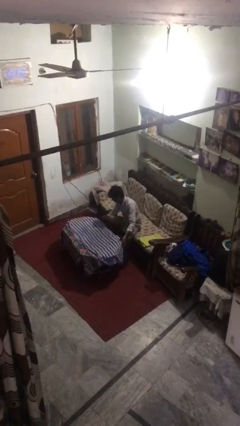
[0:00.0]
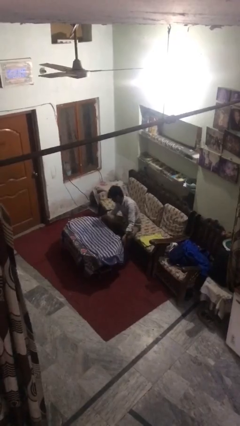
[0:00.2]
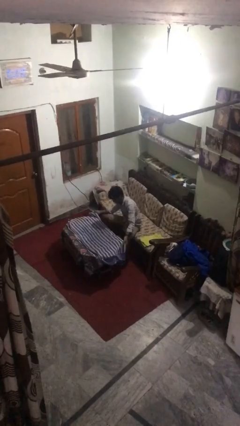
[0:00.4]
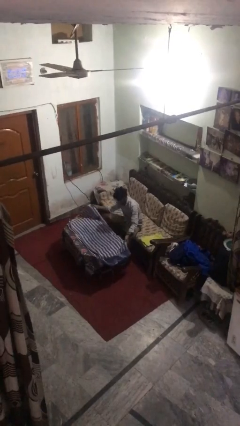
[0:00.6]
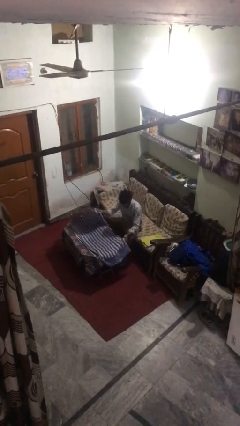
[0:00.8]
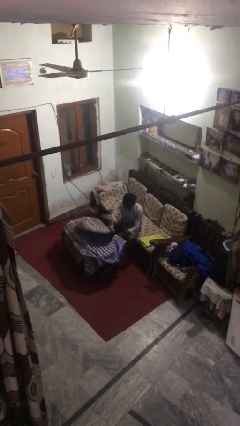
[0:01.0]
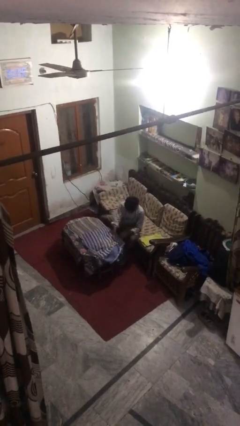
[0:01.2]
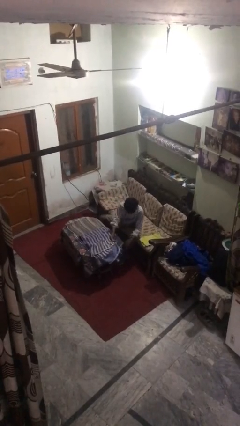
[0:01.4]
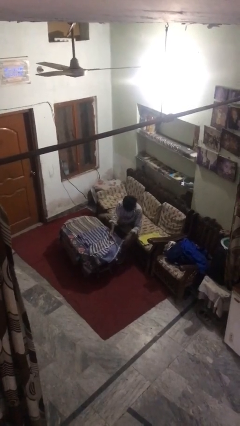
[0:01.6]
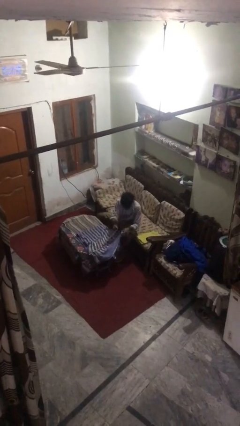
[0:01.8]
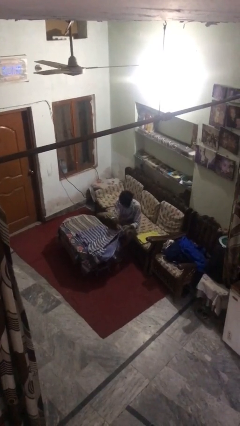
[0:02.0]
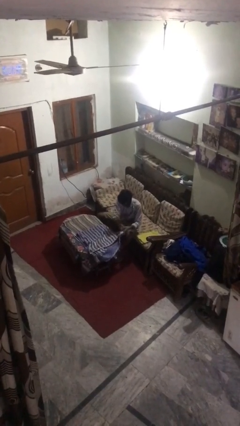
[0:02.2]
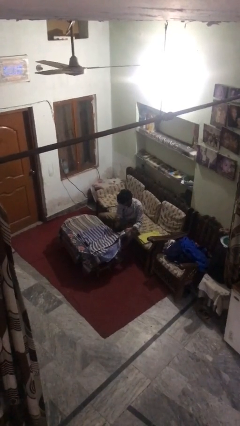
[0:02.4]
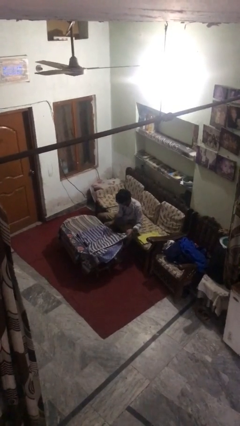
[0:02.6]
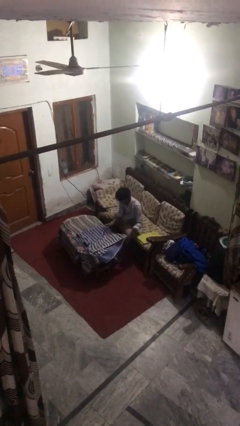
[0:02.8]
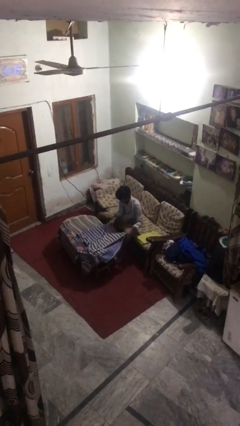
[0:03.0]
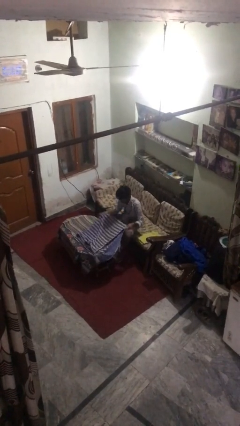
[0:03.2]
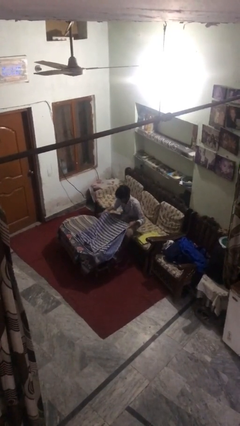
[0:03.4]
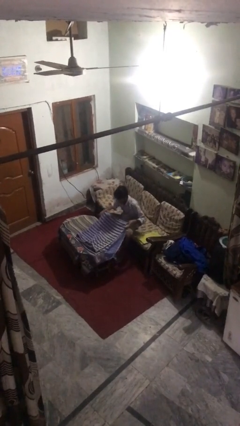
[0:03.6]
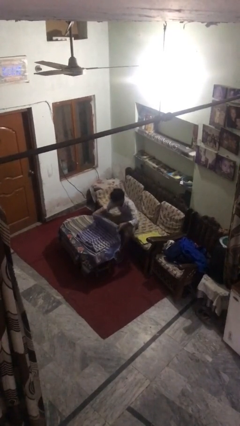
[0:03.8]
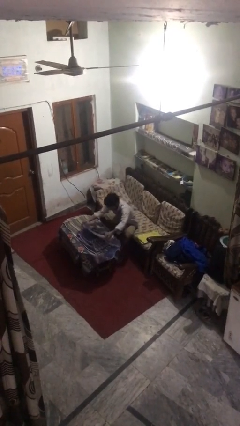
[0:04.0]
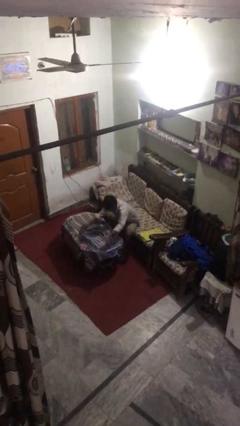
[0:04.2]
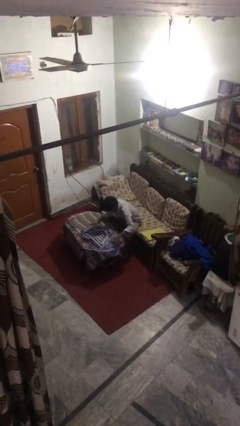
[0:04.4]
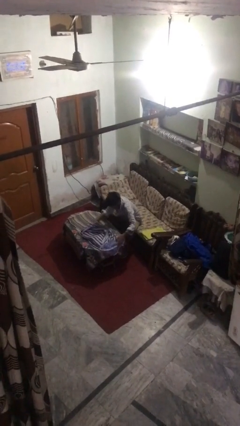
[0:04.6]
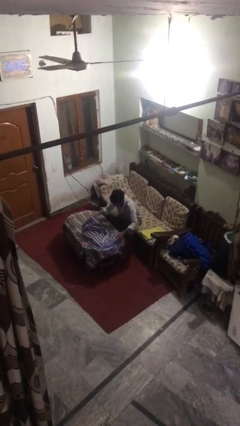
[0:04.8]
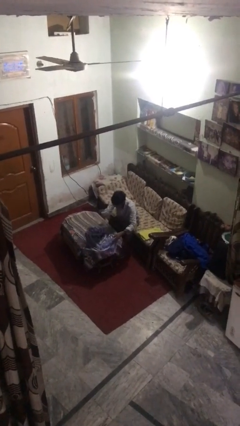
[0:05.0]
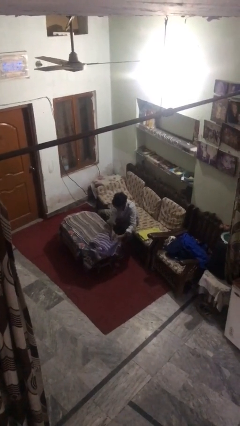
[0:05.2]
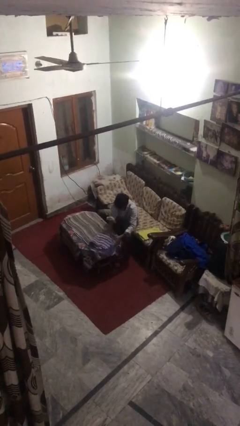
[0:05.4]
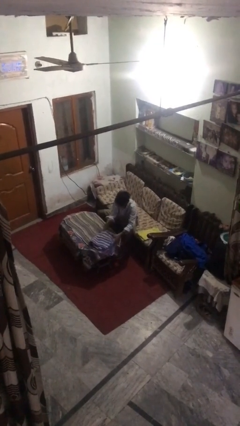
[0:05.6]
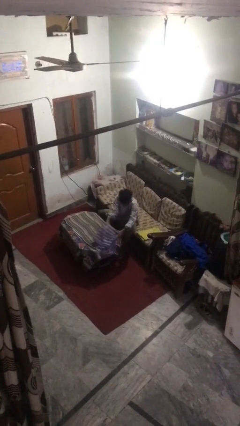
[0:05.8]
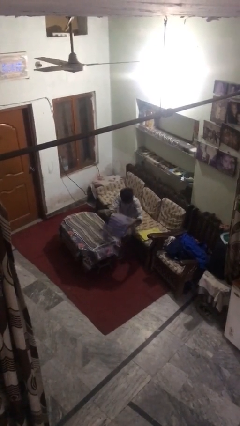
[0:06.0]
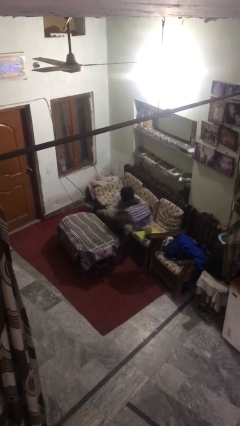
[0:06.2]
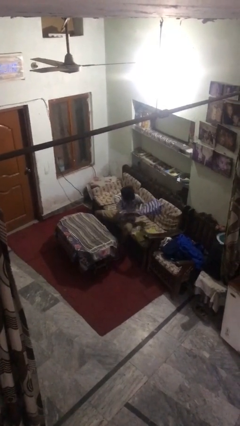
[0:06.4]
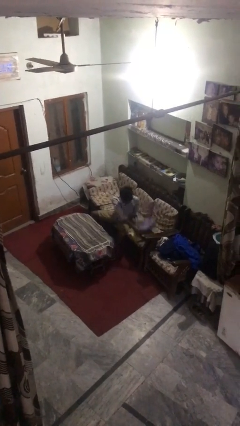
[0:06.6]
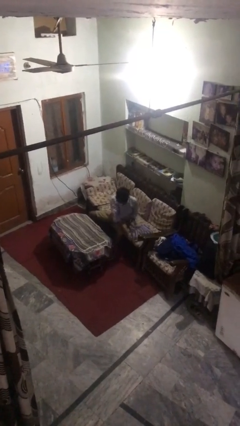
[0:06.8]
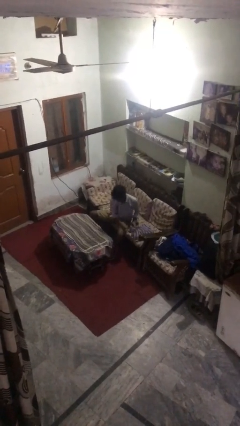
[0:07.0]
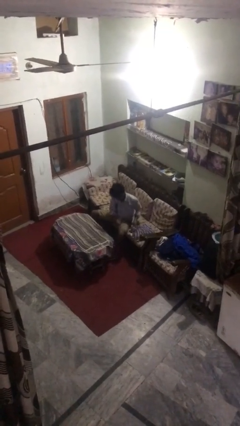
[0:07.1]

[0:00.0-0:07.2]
person folds towel

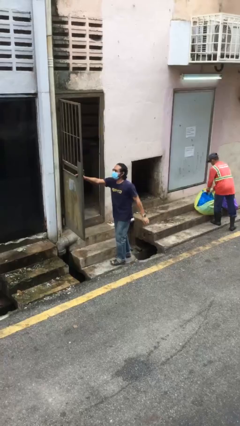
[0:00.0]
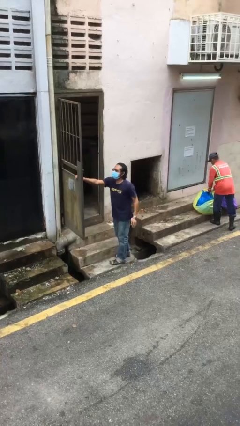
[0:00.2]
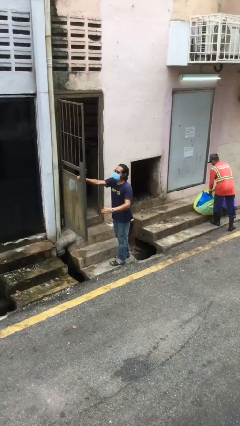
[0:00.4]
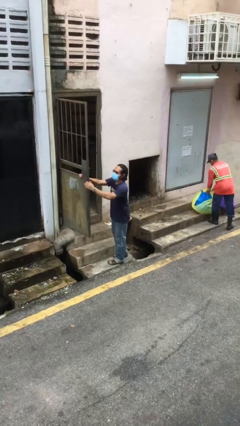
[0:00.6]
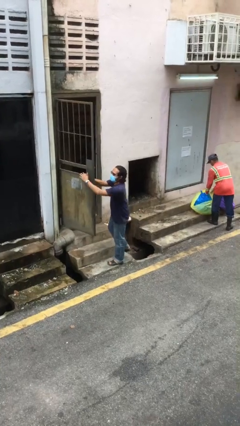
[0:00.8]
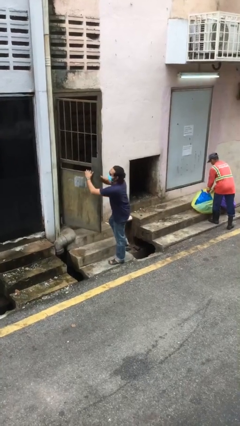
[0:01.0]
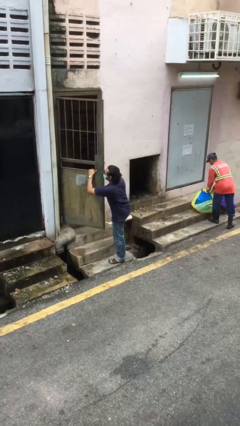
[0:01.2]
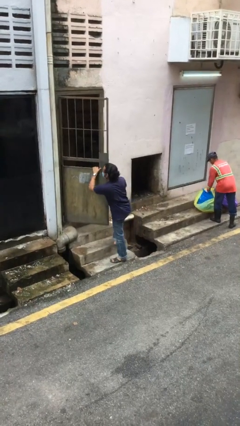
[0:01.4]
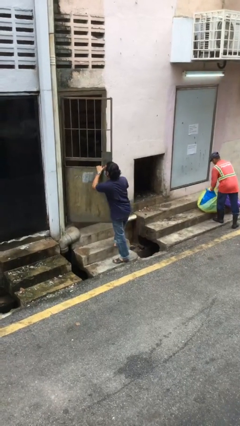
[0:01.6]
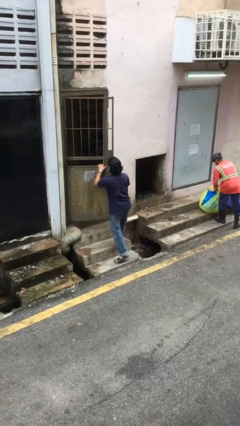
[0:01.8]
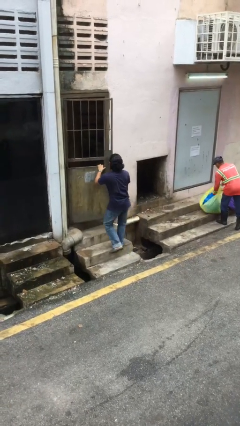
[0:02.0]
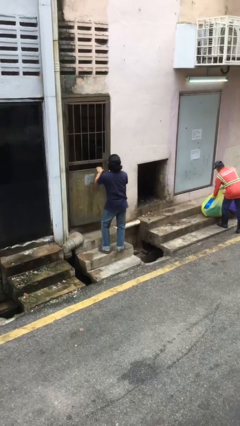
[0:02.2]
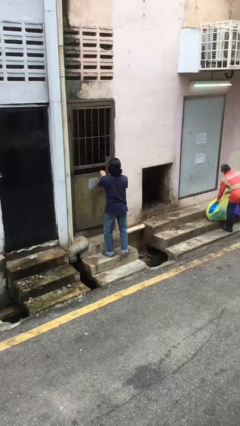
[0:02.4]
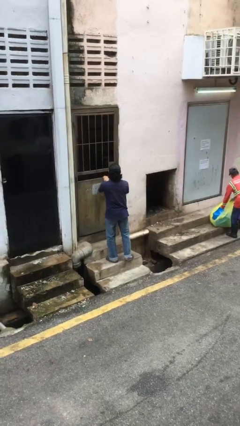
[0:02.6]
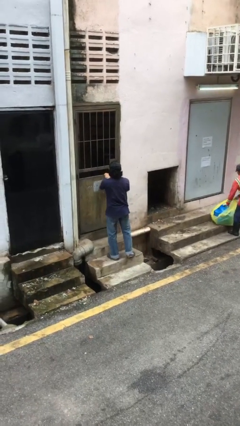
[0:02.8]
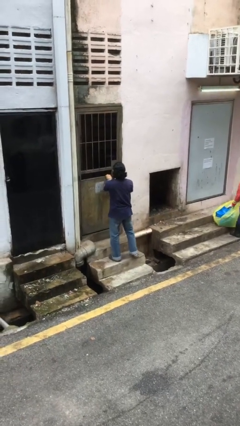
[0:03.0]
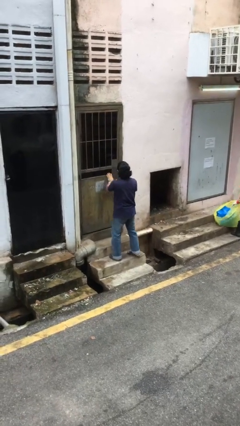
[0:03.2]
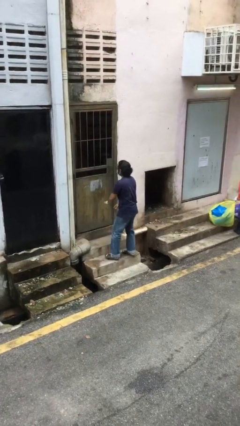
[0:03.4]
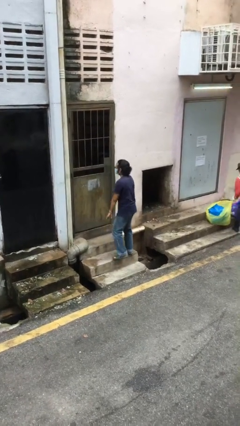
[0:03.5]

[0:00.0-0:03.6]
person closes facility door

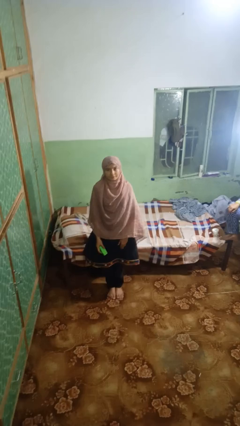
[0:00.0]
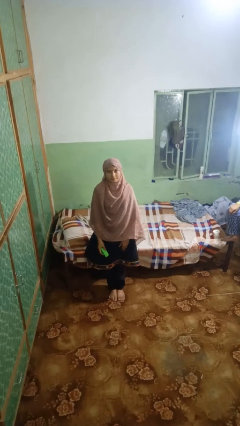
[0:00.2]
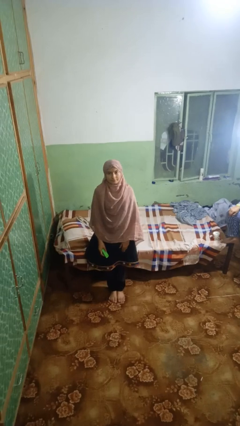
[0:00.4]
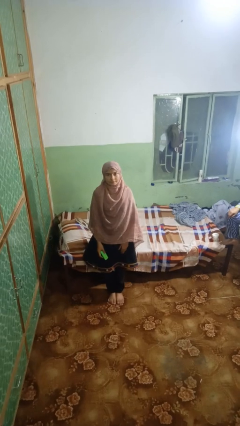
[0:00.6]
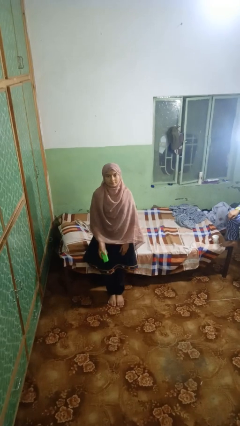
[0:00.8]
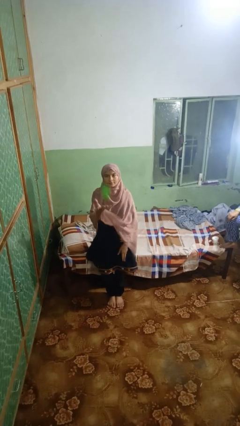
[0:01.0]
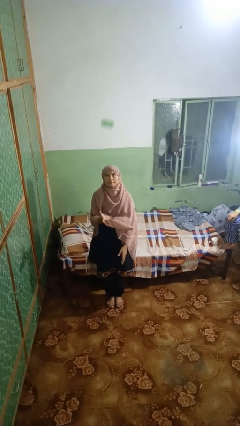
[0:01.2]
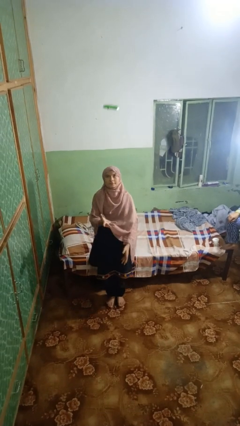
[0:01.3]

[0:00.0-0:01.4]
person throws object into air

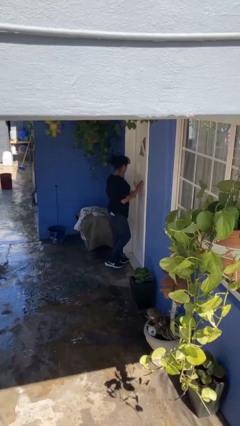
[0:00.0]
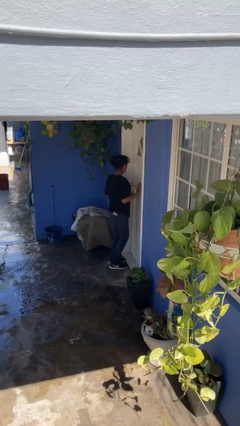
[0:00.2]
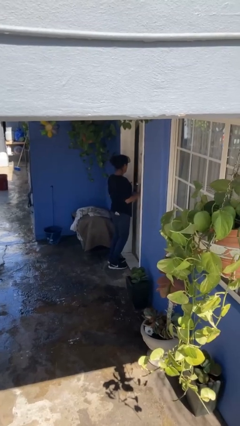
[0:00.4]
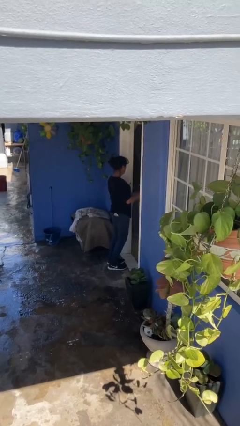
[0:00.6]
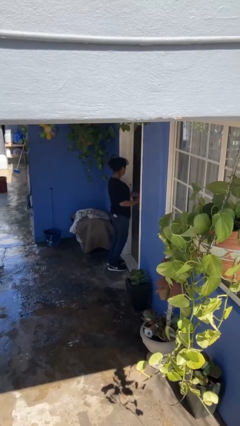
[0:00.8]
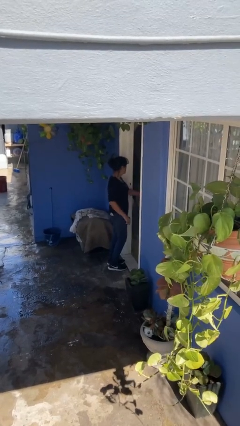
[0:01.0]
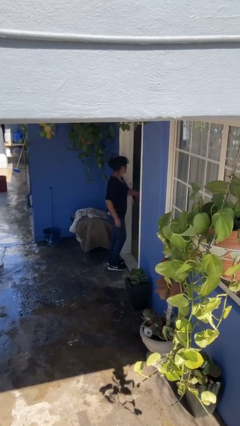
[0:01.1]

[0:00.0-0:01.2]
person opens facility door

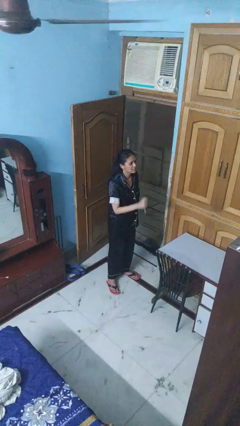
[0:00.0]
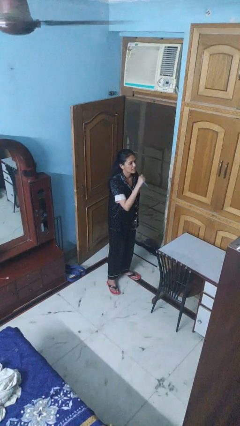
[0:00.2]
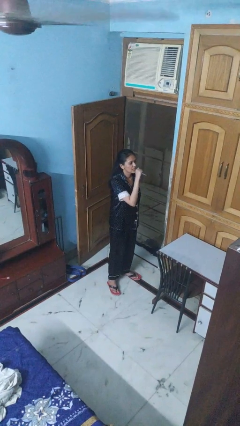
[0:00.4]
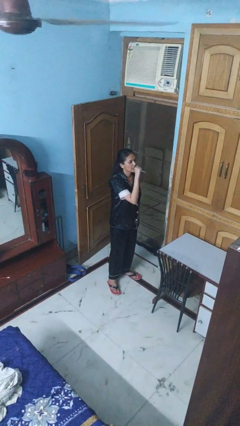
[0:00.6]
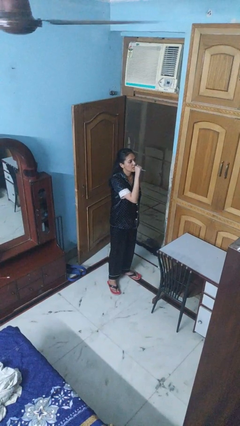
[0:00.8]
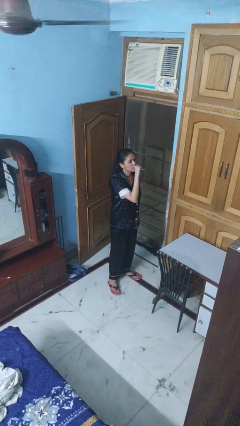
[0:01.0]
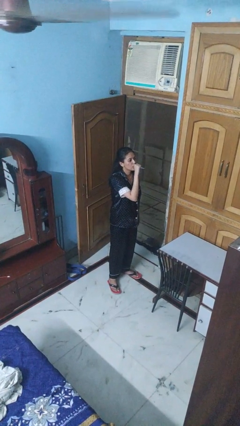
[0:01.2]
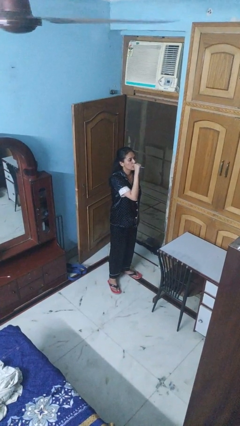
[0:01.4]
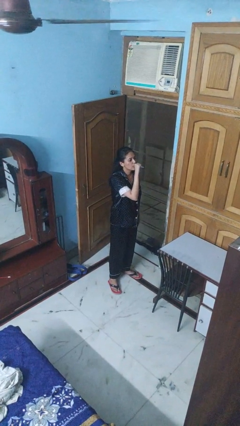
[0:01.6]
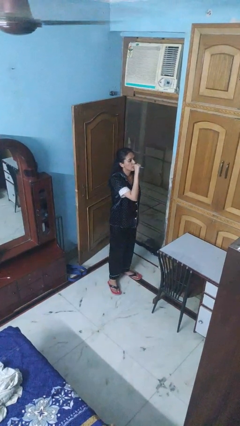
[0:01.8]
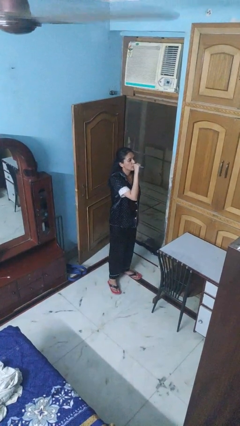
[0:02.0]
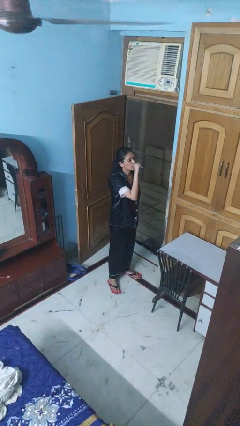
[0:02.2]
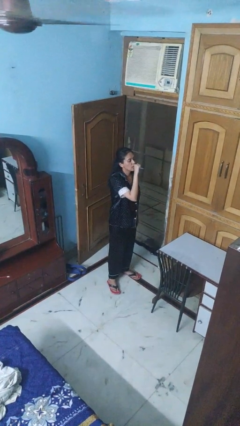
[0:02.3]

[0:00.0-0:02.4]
person vapes

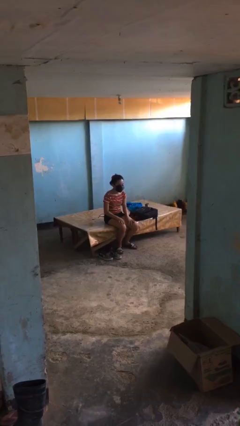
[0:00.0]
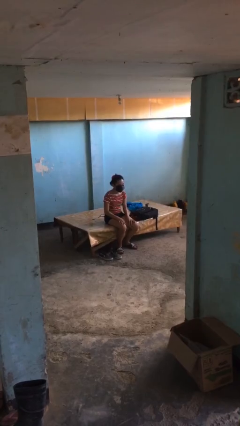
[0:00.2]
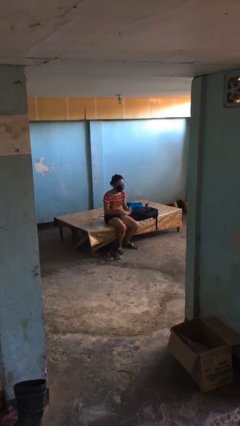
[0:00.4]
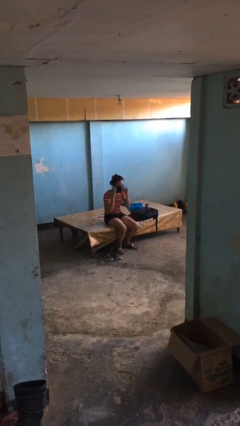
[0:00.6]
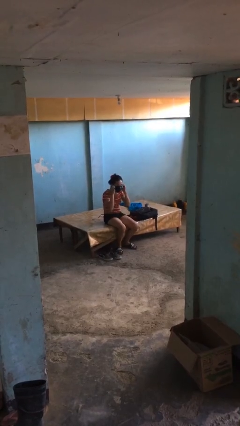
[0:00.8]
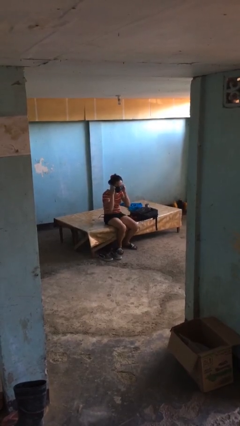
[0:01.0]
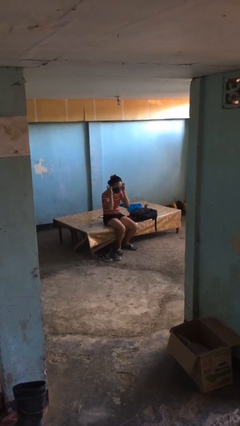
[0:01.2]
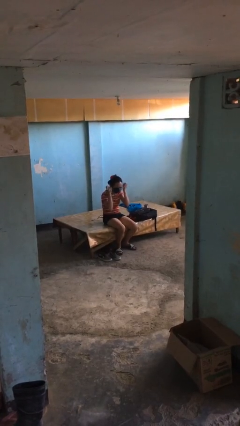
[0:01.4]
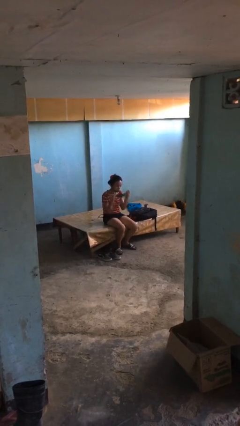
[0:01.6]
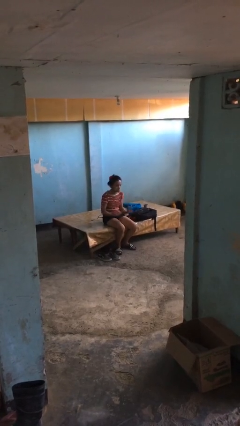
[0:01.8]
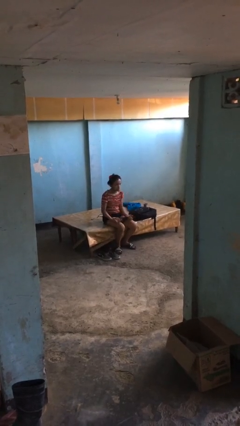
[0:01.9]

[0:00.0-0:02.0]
person takes off facemask
